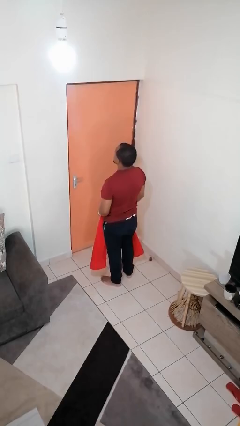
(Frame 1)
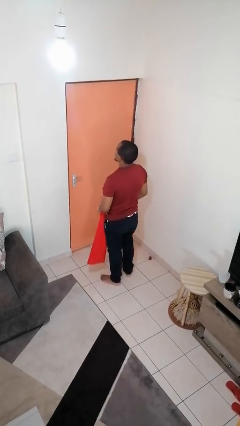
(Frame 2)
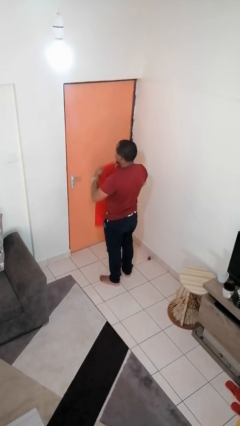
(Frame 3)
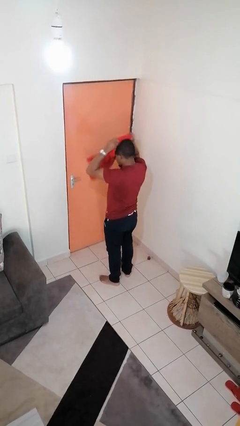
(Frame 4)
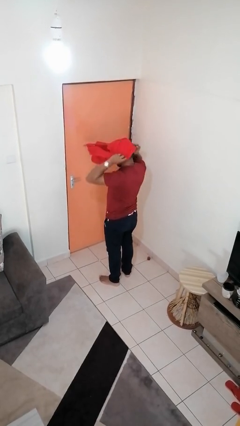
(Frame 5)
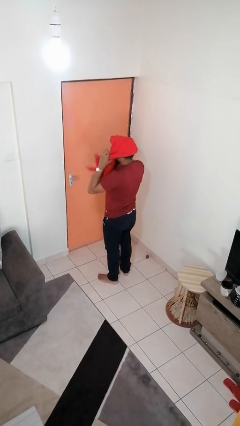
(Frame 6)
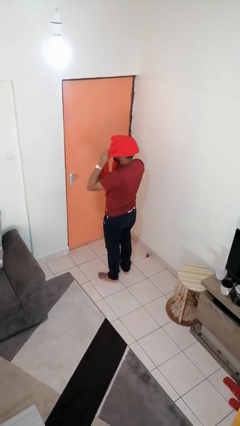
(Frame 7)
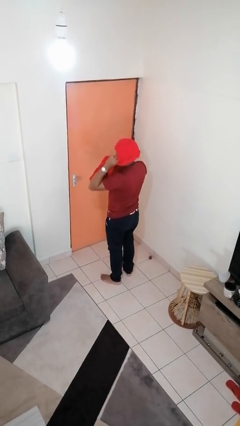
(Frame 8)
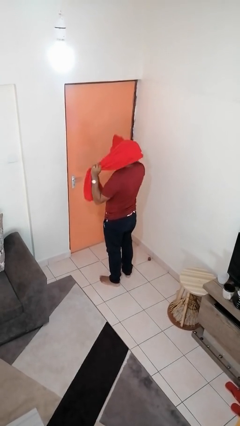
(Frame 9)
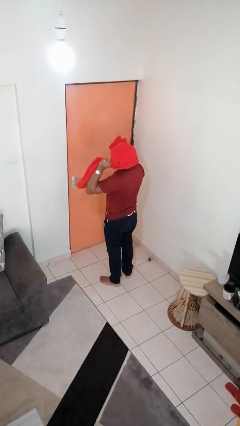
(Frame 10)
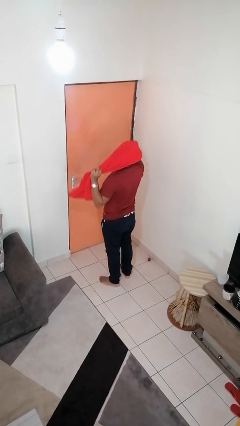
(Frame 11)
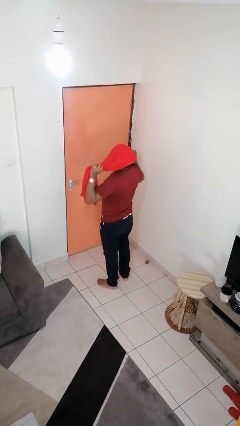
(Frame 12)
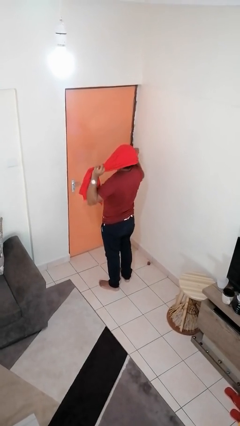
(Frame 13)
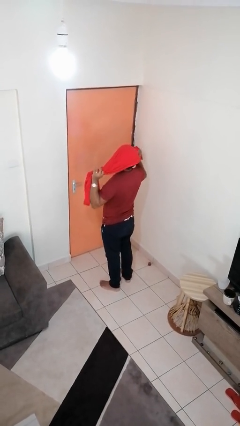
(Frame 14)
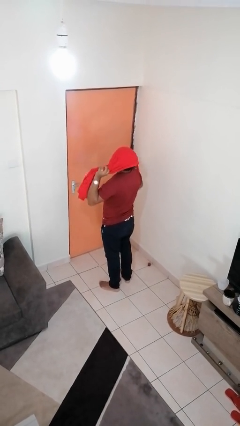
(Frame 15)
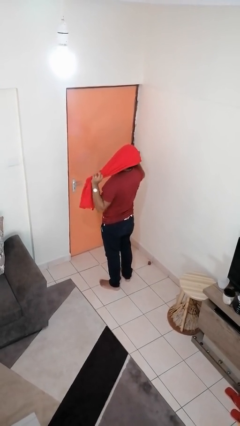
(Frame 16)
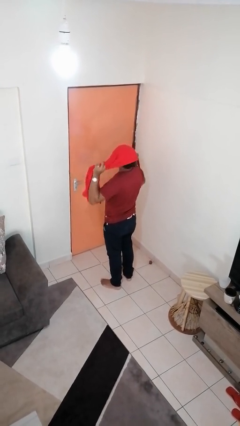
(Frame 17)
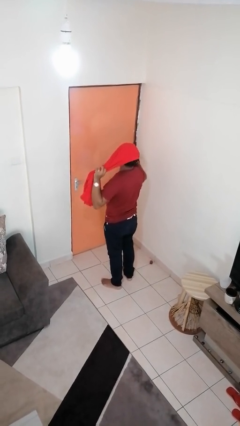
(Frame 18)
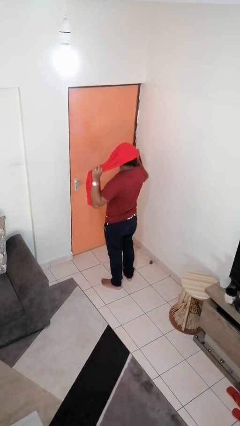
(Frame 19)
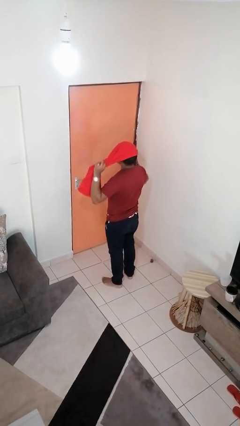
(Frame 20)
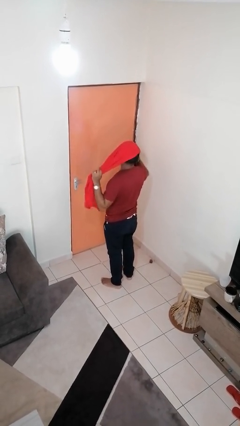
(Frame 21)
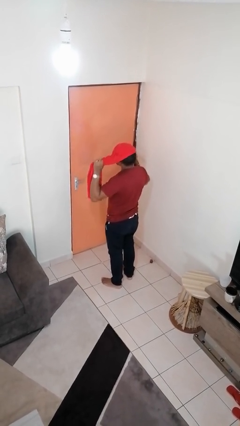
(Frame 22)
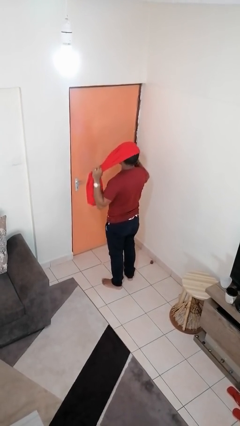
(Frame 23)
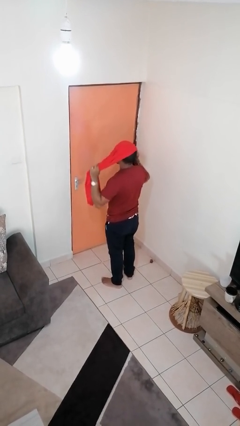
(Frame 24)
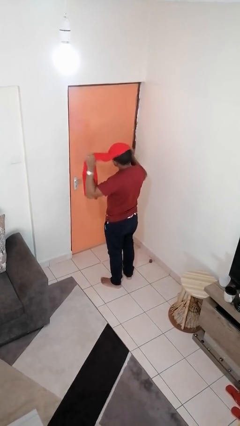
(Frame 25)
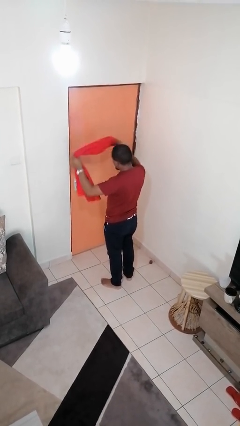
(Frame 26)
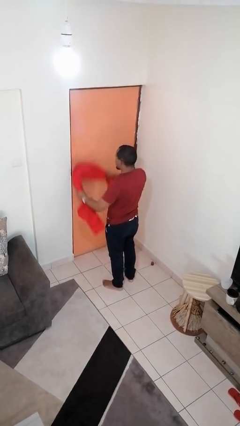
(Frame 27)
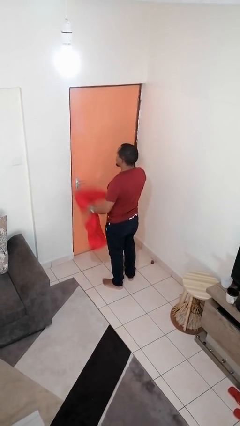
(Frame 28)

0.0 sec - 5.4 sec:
person dries hair with towel

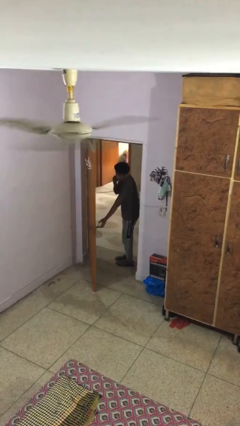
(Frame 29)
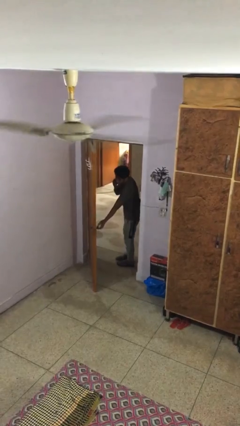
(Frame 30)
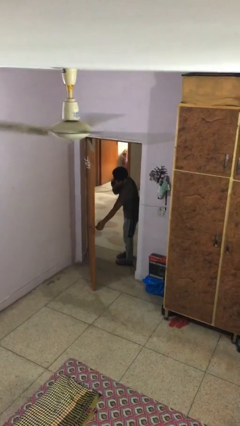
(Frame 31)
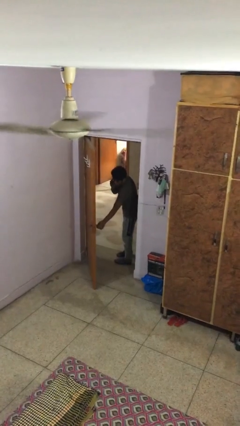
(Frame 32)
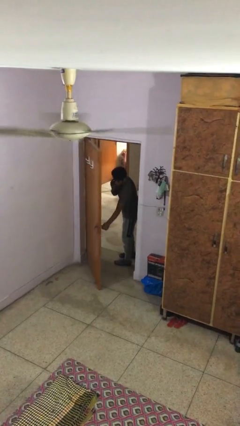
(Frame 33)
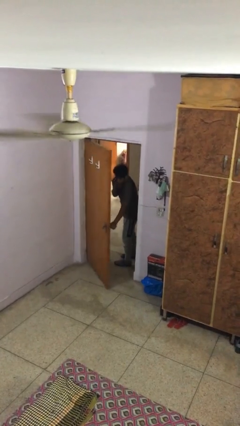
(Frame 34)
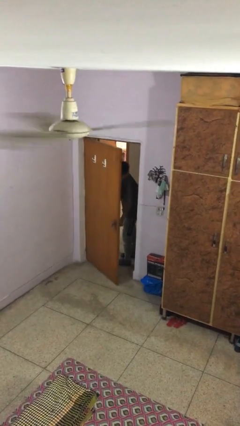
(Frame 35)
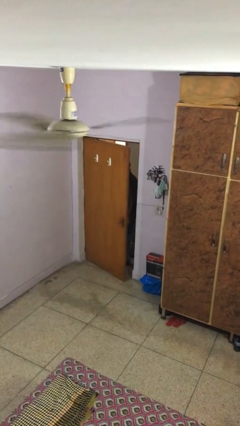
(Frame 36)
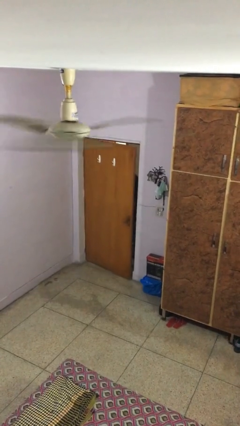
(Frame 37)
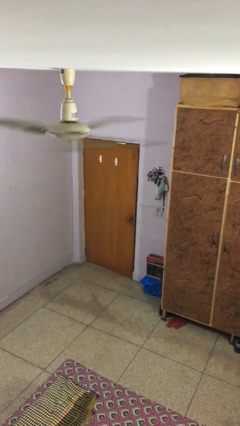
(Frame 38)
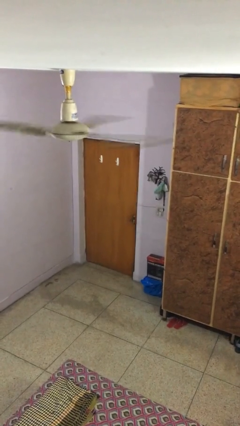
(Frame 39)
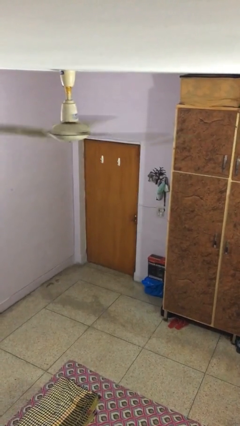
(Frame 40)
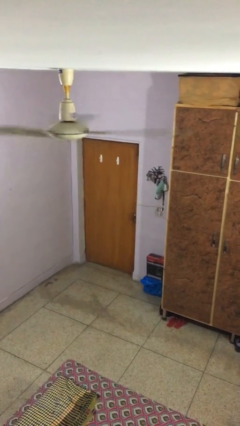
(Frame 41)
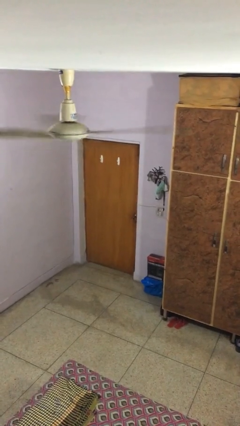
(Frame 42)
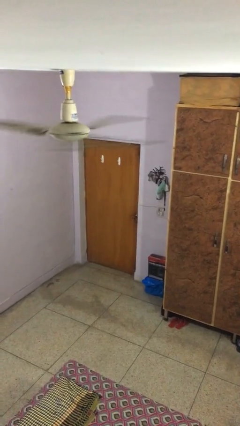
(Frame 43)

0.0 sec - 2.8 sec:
person closes facility door

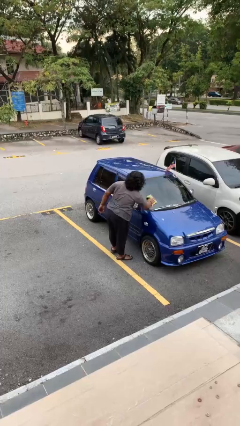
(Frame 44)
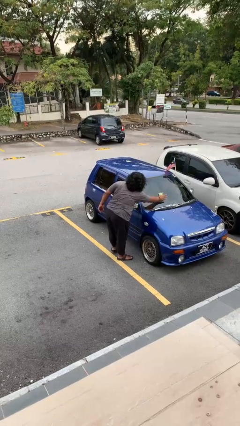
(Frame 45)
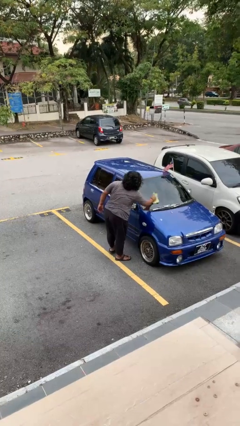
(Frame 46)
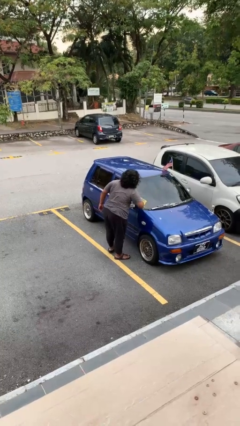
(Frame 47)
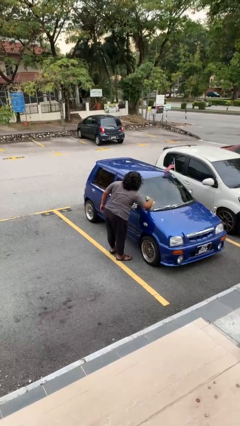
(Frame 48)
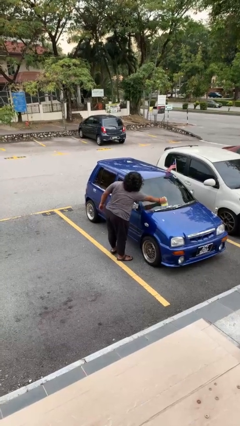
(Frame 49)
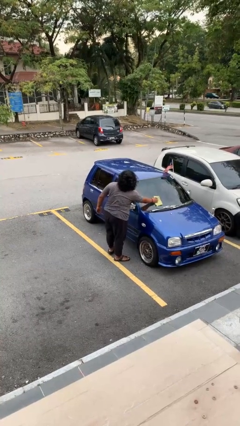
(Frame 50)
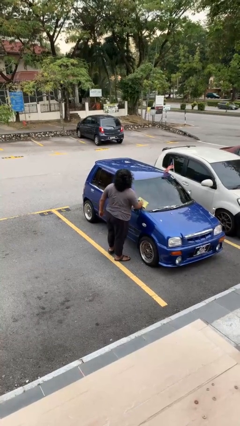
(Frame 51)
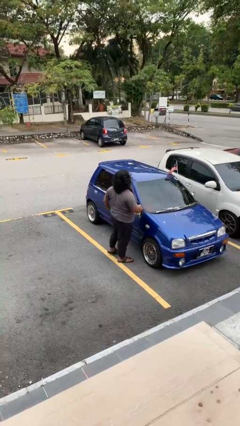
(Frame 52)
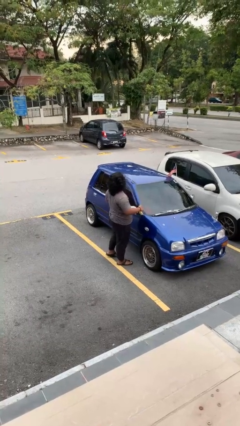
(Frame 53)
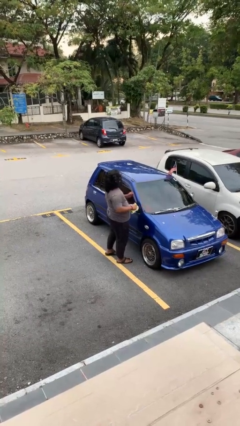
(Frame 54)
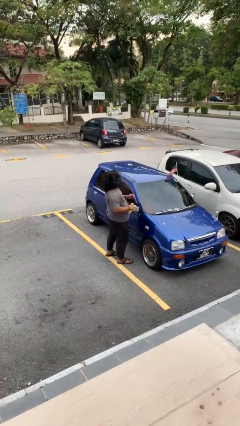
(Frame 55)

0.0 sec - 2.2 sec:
person polishes car with rag

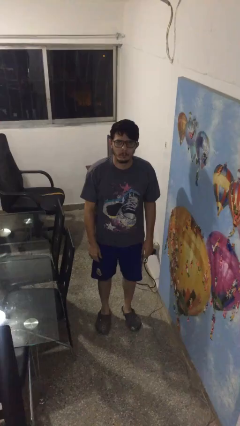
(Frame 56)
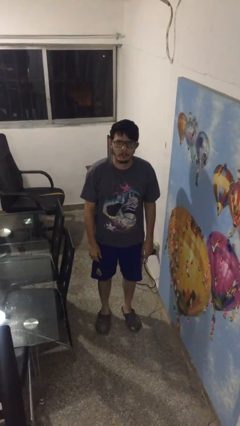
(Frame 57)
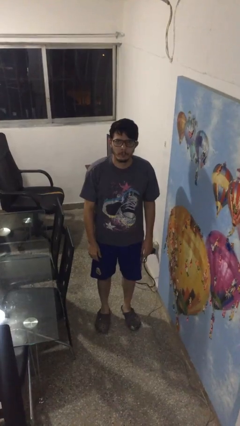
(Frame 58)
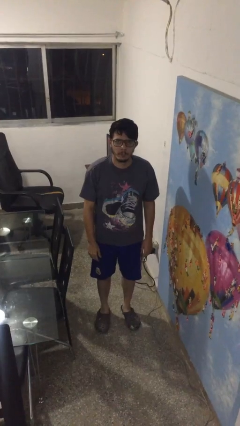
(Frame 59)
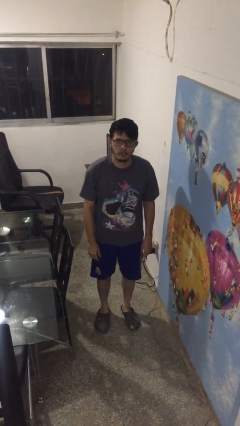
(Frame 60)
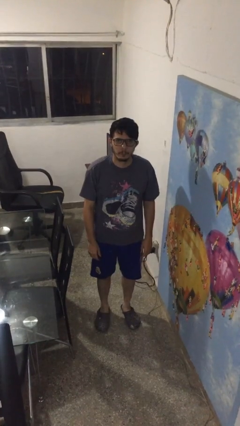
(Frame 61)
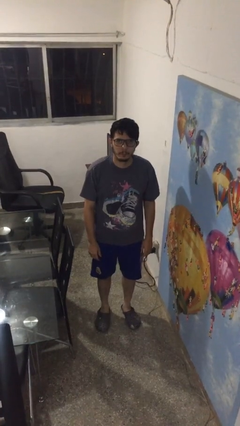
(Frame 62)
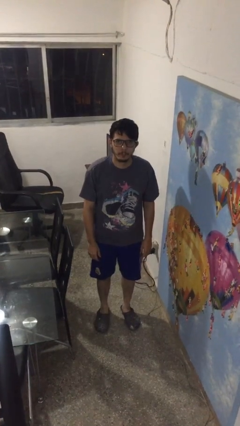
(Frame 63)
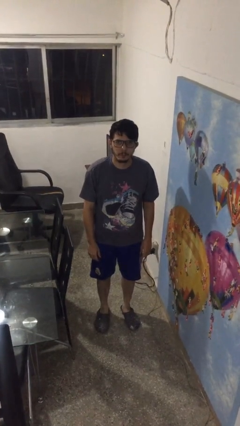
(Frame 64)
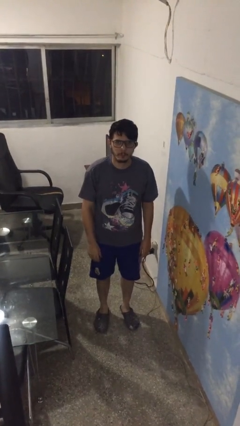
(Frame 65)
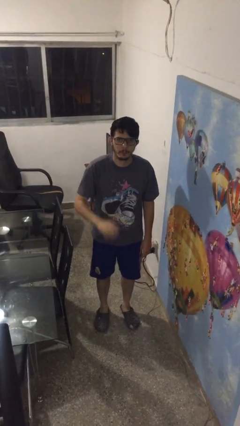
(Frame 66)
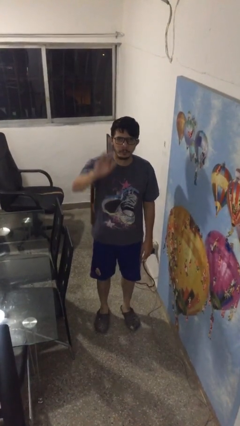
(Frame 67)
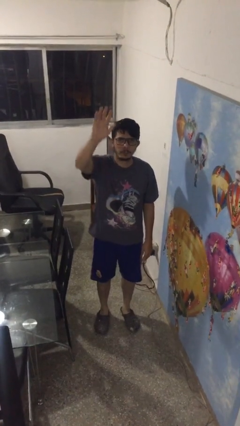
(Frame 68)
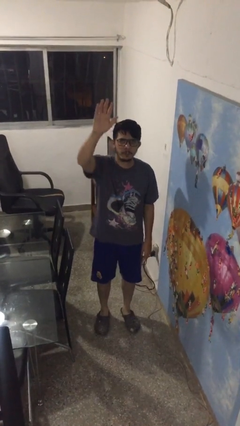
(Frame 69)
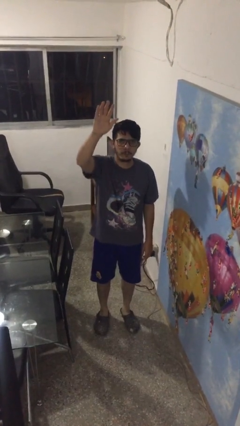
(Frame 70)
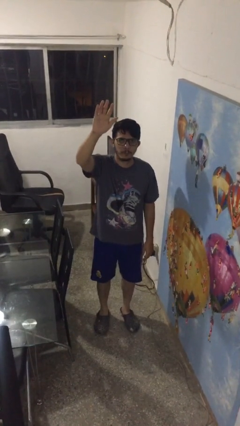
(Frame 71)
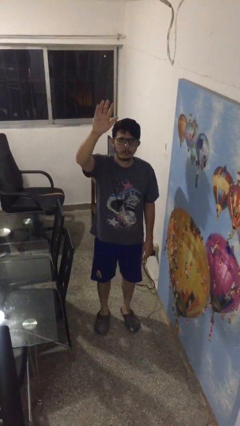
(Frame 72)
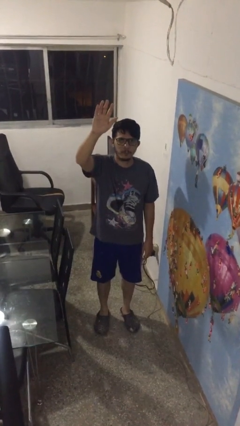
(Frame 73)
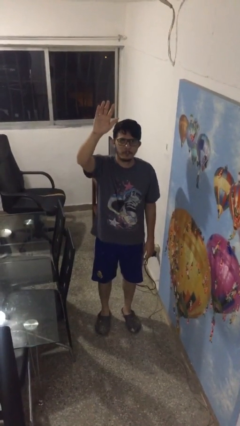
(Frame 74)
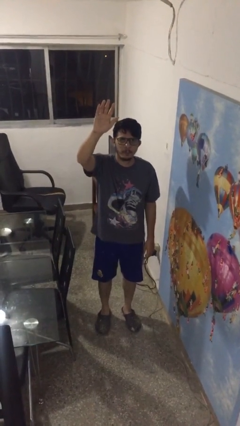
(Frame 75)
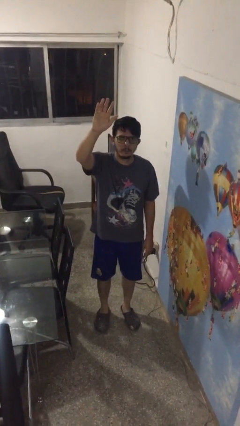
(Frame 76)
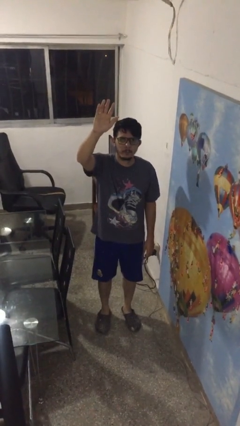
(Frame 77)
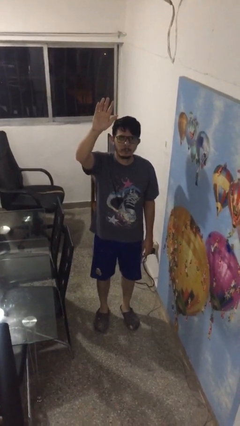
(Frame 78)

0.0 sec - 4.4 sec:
person gestures raise hand

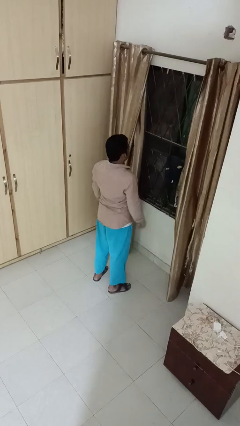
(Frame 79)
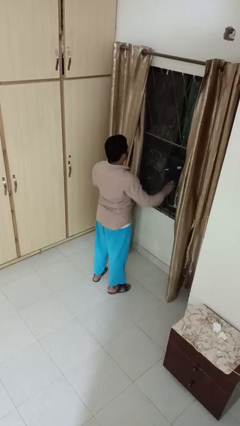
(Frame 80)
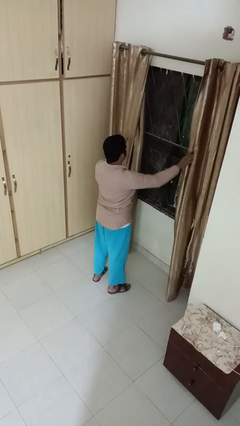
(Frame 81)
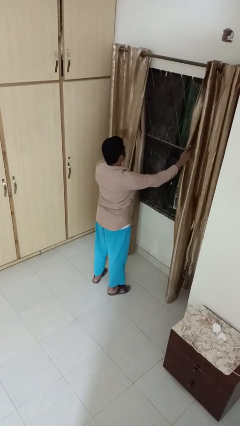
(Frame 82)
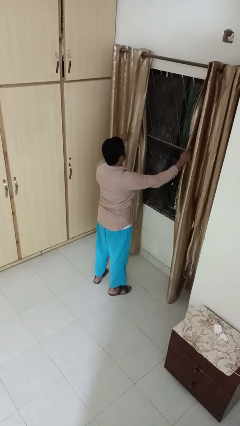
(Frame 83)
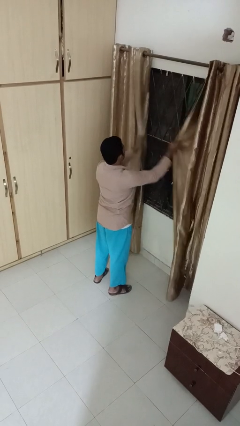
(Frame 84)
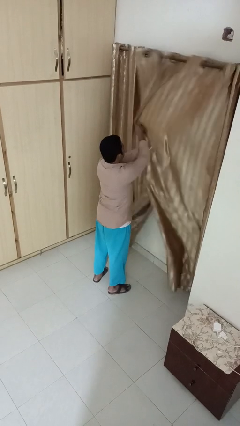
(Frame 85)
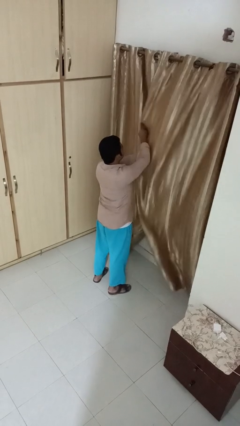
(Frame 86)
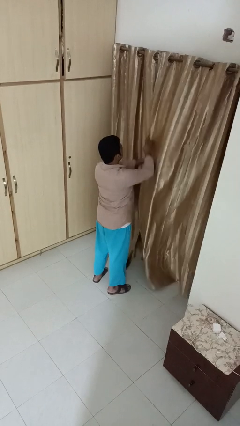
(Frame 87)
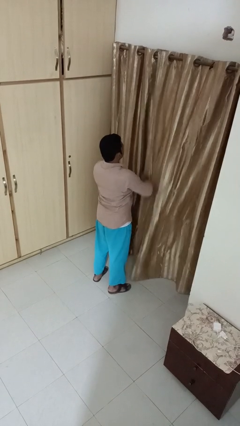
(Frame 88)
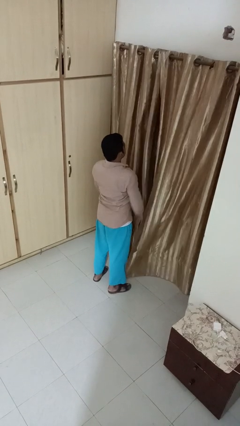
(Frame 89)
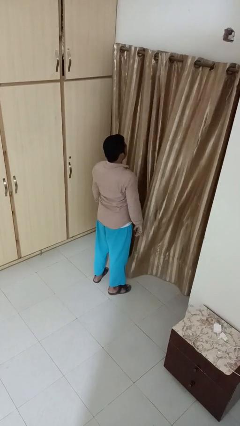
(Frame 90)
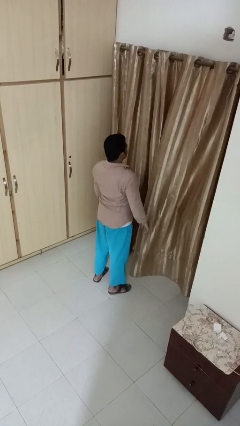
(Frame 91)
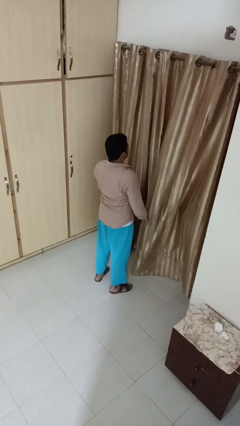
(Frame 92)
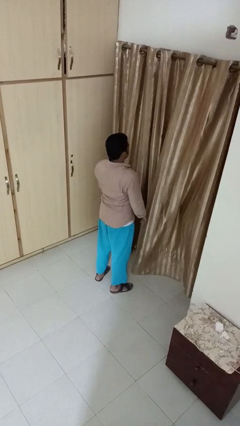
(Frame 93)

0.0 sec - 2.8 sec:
person closes curtains
